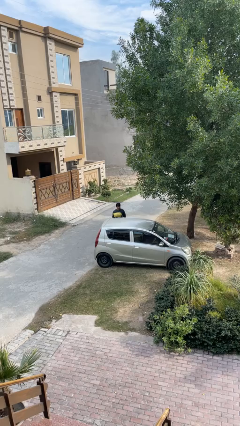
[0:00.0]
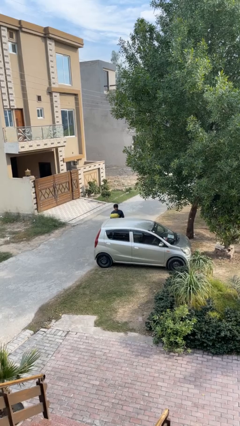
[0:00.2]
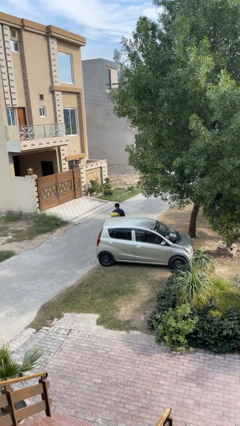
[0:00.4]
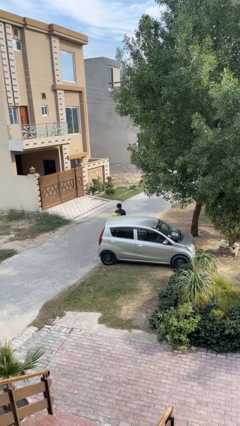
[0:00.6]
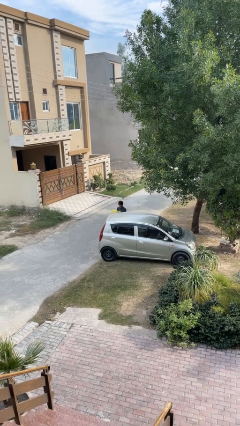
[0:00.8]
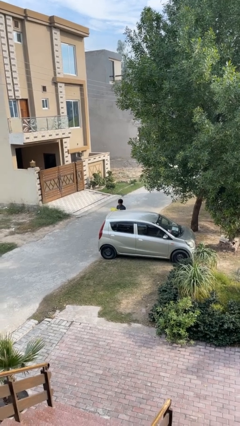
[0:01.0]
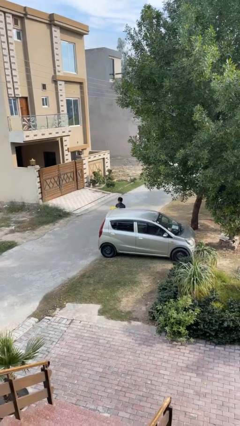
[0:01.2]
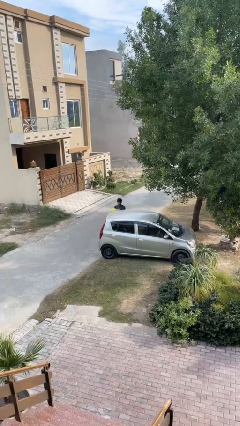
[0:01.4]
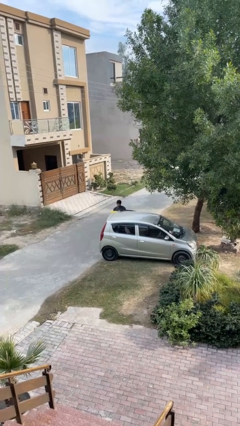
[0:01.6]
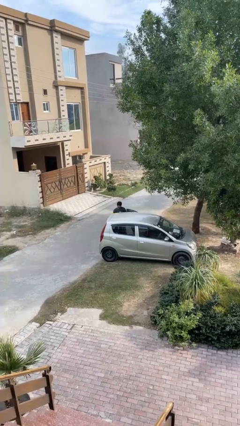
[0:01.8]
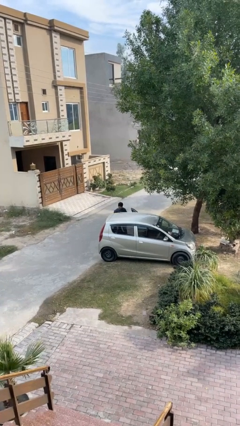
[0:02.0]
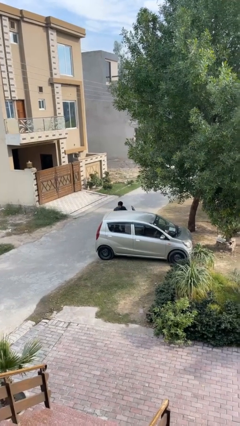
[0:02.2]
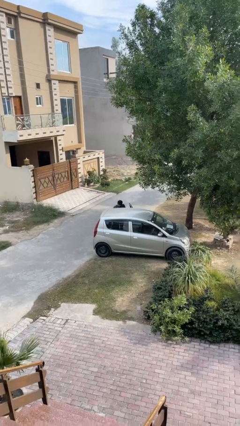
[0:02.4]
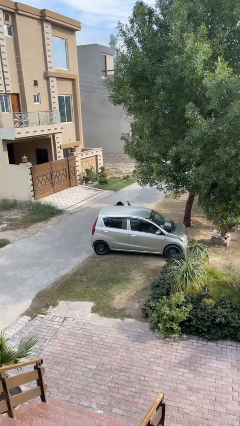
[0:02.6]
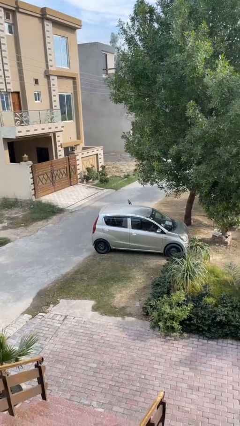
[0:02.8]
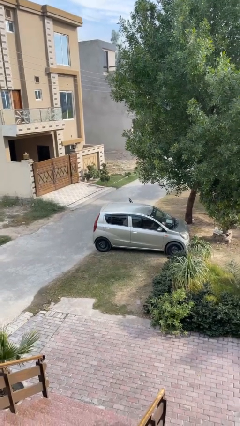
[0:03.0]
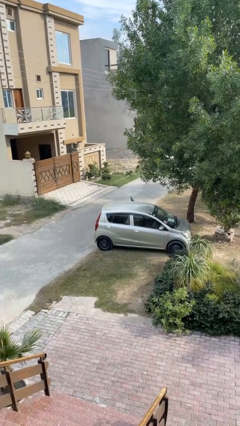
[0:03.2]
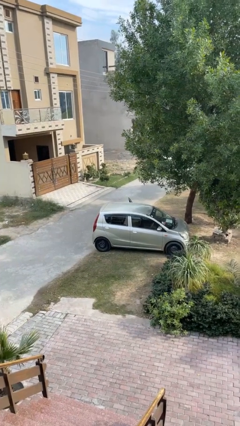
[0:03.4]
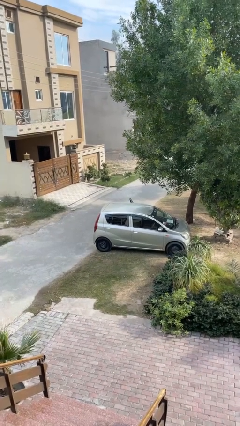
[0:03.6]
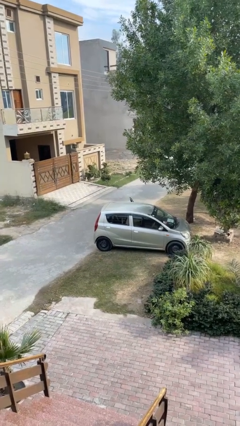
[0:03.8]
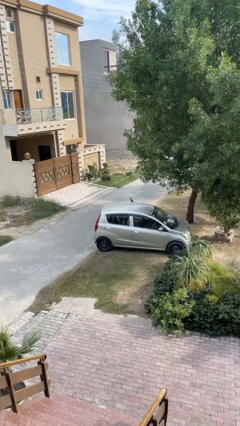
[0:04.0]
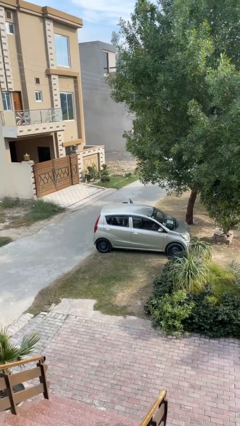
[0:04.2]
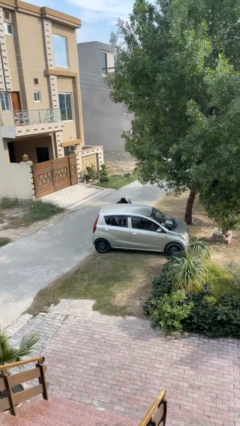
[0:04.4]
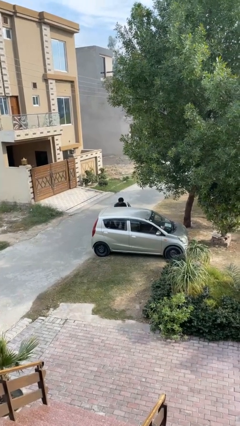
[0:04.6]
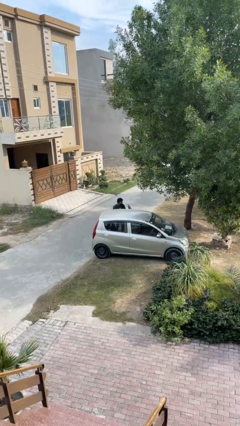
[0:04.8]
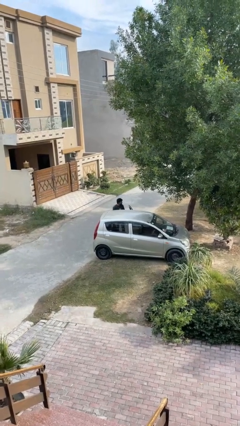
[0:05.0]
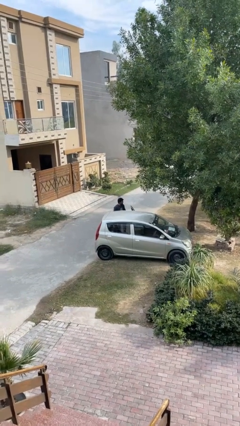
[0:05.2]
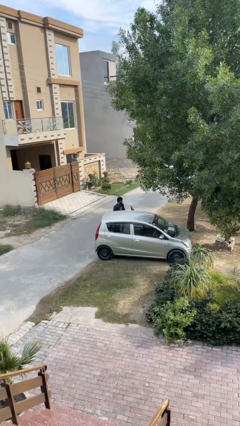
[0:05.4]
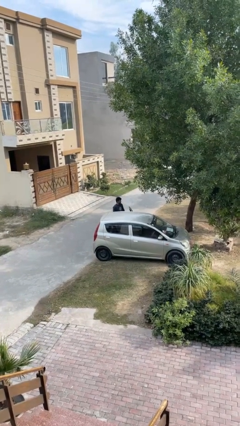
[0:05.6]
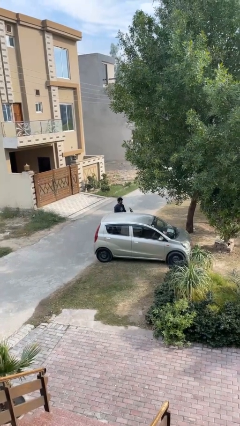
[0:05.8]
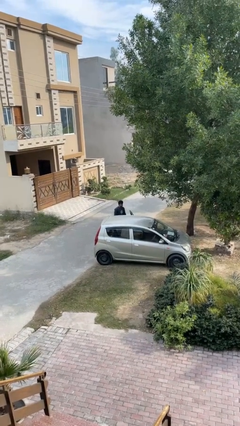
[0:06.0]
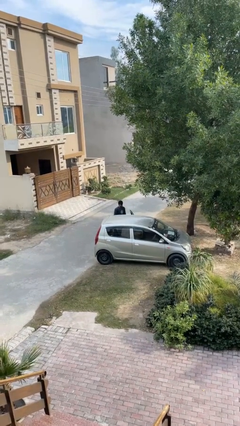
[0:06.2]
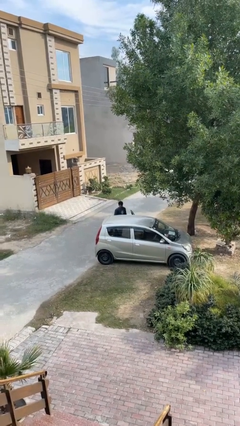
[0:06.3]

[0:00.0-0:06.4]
person loads car

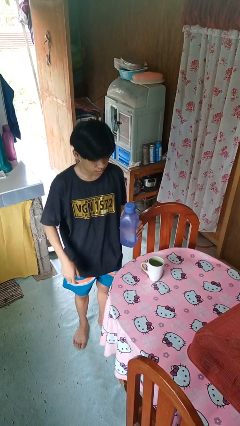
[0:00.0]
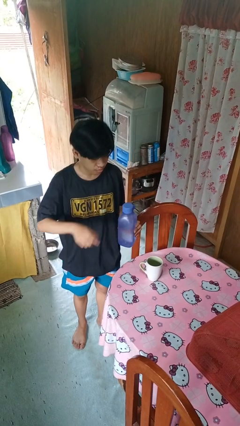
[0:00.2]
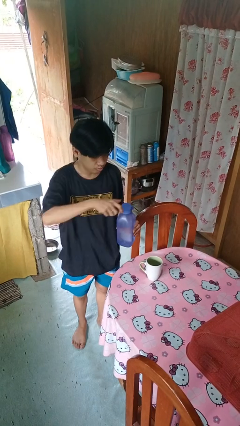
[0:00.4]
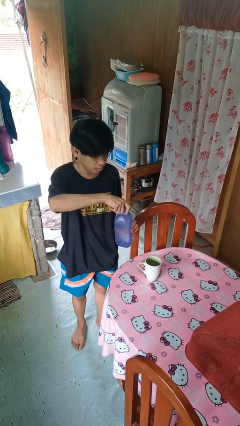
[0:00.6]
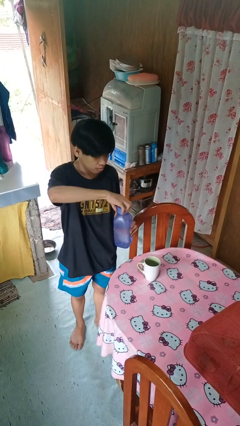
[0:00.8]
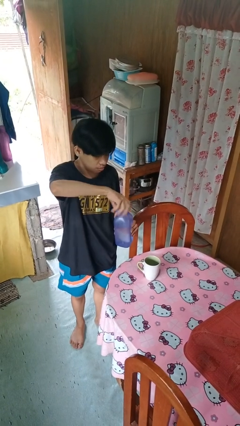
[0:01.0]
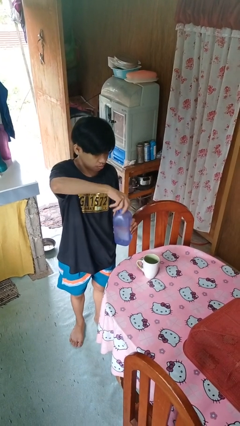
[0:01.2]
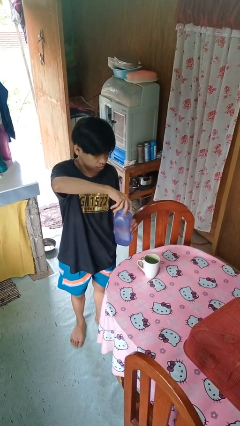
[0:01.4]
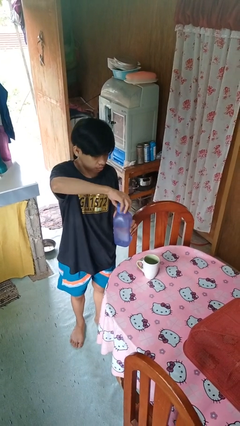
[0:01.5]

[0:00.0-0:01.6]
person unscrews lid from bottle

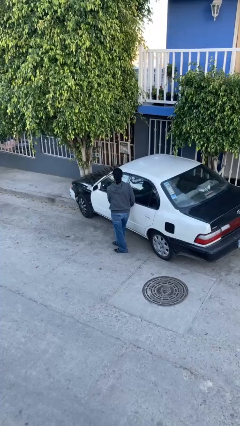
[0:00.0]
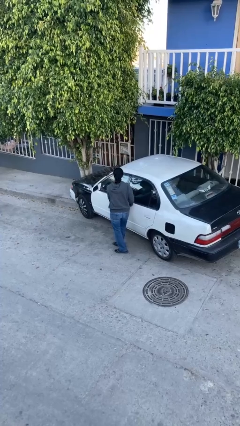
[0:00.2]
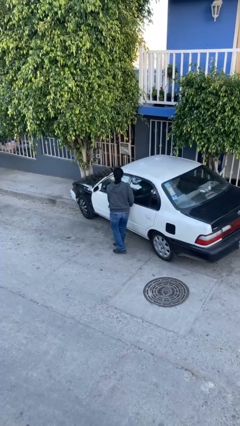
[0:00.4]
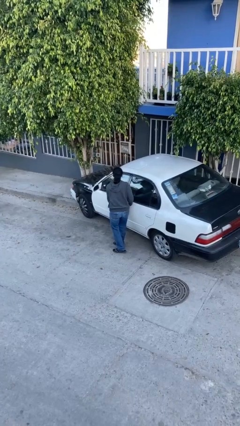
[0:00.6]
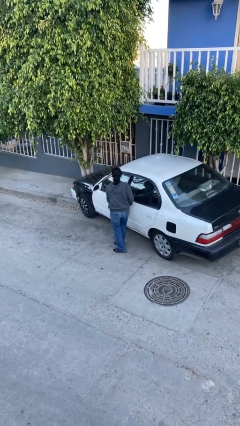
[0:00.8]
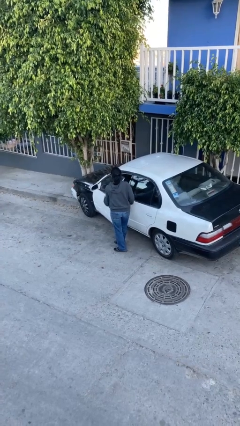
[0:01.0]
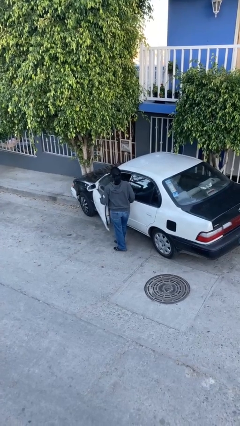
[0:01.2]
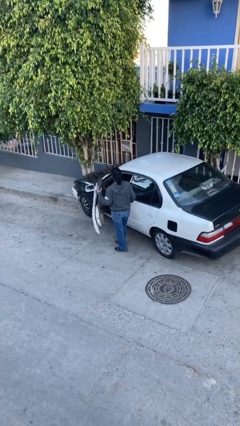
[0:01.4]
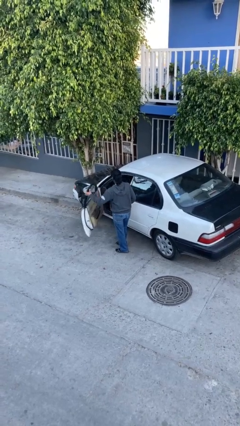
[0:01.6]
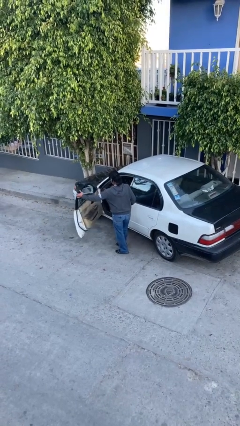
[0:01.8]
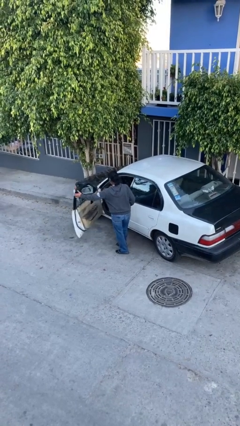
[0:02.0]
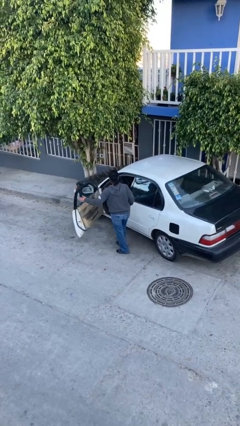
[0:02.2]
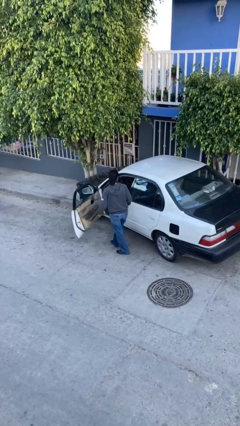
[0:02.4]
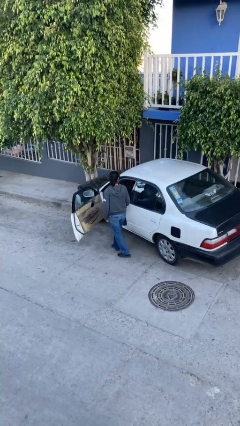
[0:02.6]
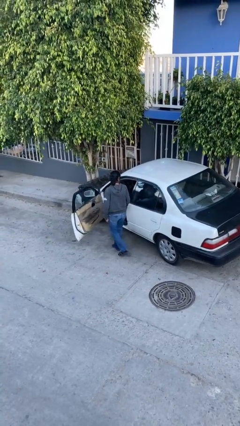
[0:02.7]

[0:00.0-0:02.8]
person opens car door

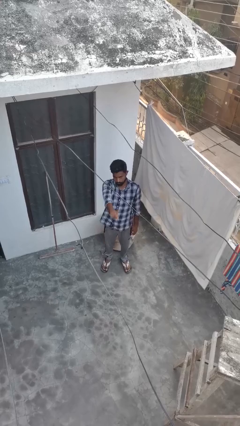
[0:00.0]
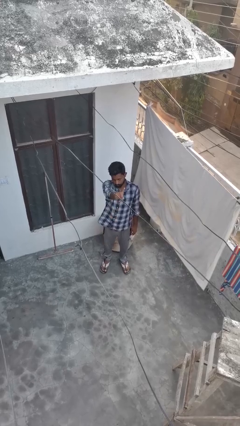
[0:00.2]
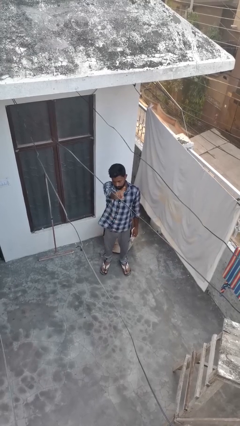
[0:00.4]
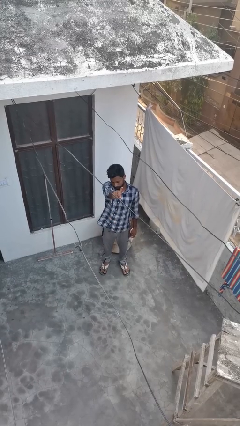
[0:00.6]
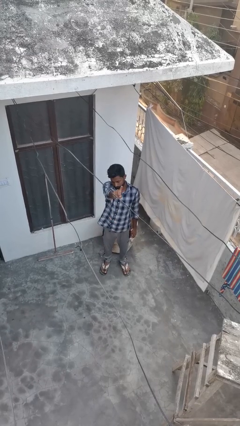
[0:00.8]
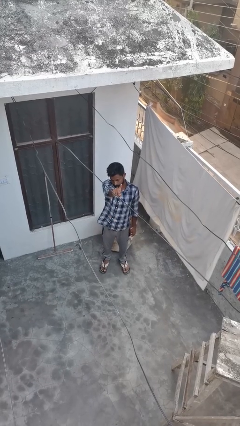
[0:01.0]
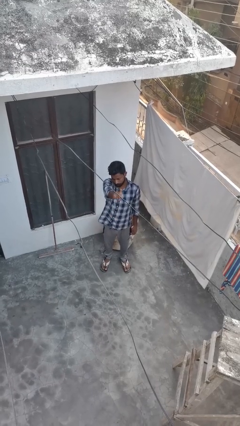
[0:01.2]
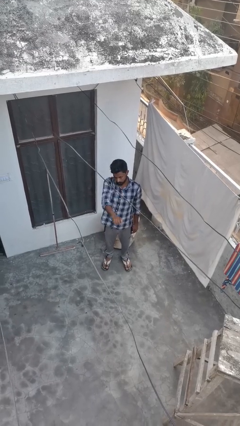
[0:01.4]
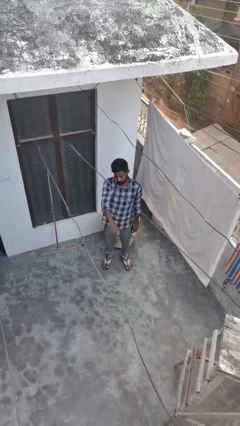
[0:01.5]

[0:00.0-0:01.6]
person gestures number one

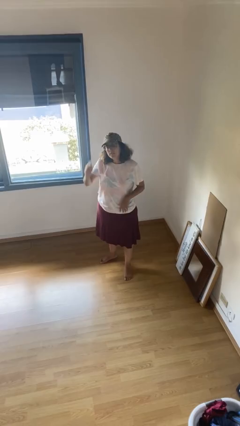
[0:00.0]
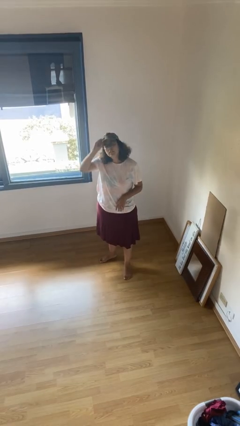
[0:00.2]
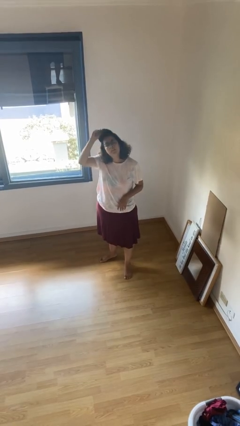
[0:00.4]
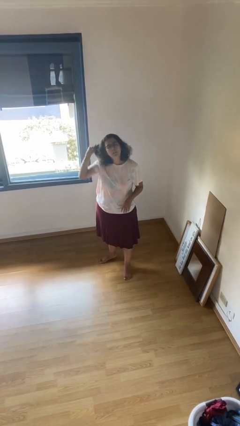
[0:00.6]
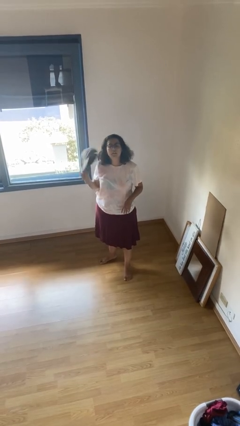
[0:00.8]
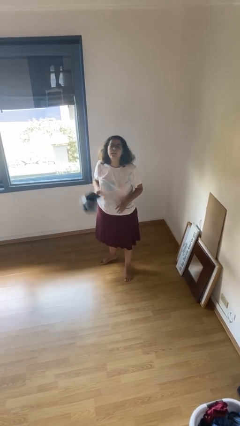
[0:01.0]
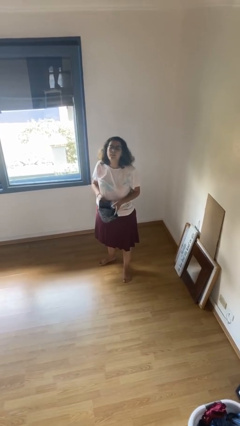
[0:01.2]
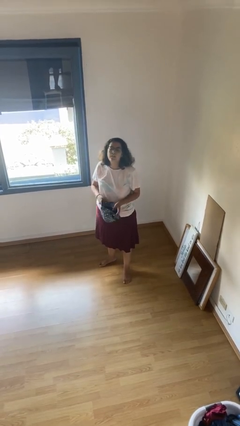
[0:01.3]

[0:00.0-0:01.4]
person takes off hat

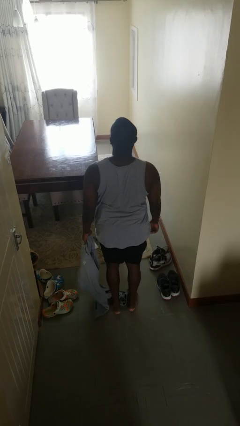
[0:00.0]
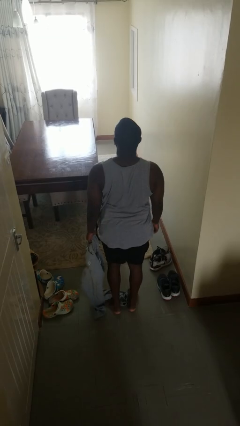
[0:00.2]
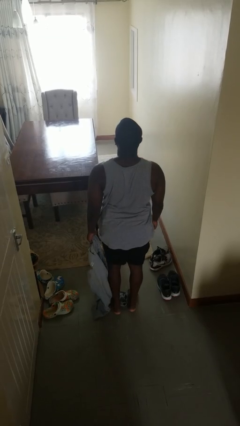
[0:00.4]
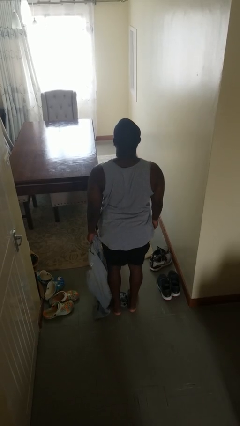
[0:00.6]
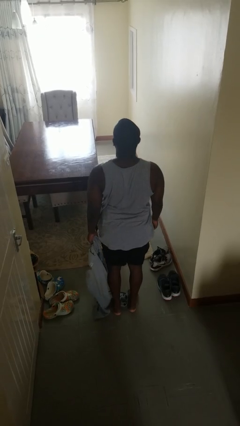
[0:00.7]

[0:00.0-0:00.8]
person puts on pants

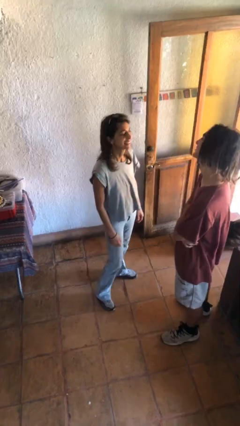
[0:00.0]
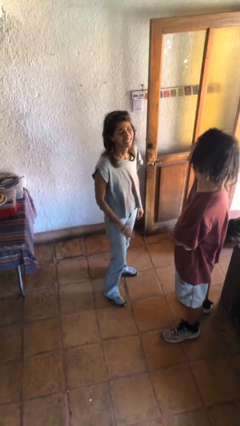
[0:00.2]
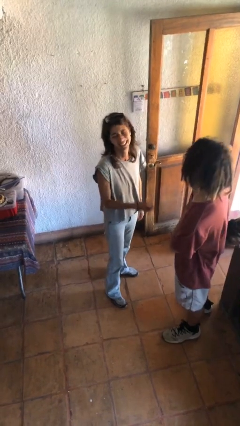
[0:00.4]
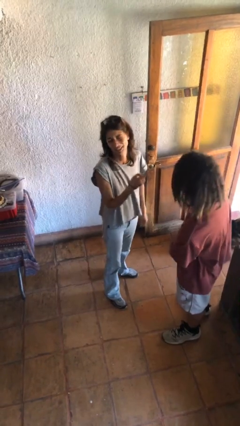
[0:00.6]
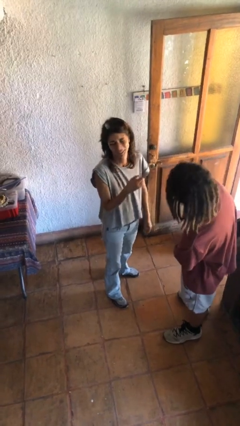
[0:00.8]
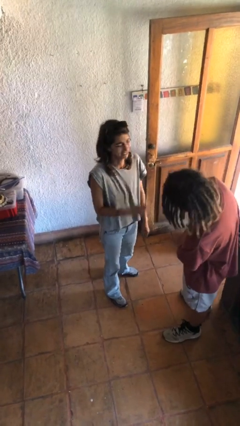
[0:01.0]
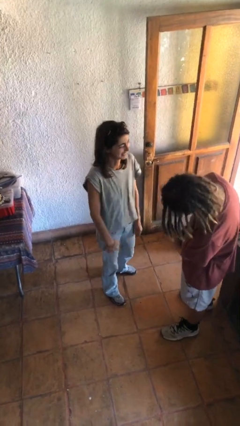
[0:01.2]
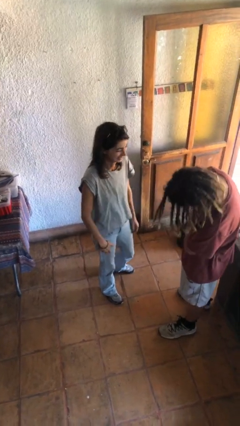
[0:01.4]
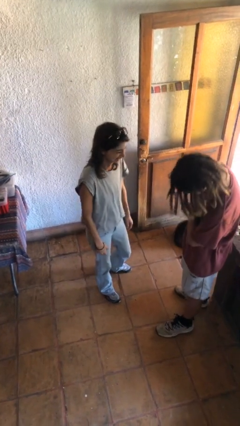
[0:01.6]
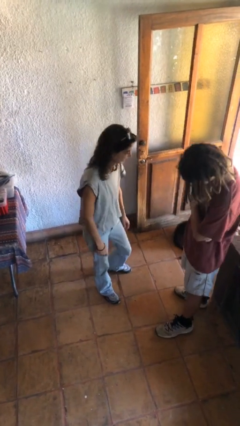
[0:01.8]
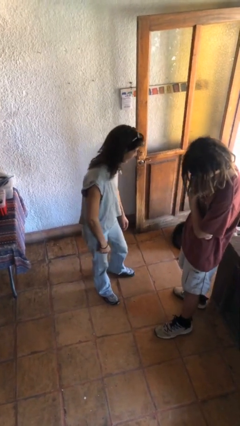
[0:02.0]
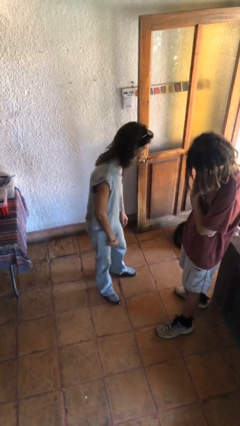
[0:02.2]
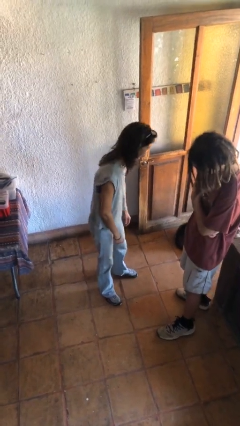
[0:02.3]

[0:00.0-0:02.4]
person laughs with person

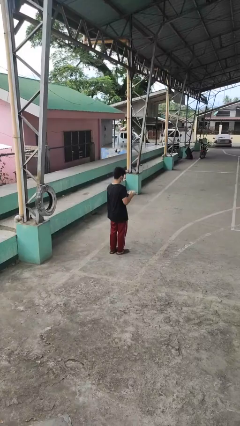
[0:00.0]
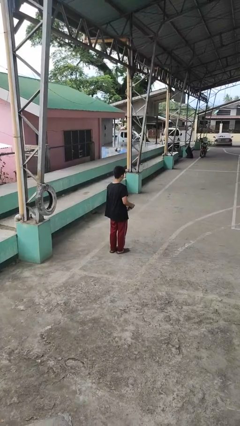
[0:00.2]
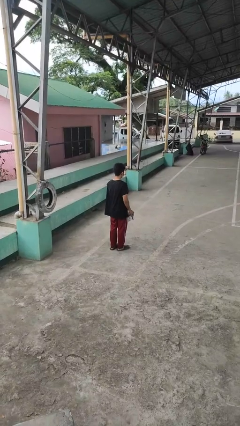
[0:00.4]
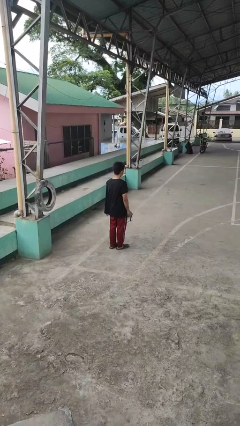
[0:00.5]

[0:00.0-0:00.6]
person squeezes object
